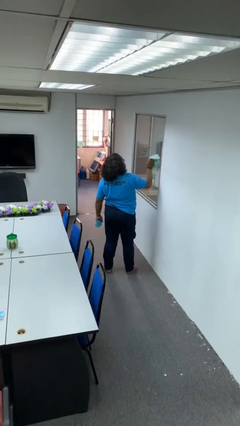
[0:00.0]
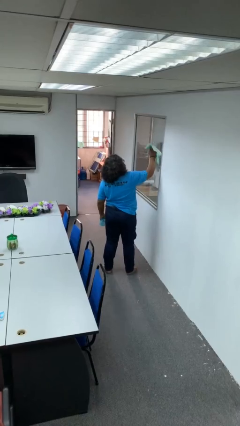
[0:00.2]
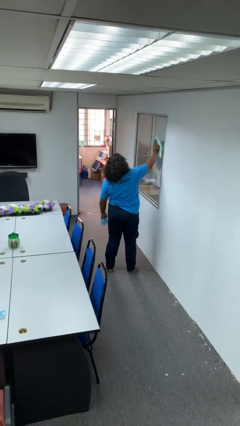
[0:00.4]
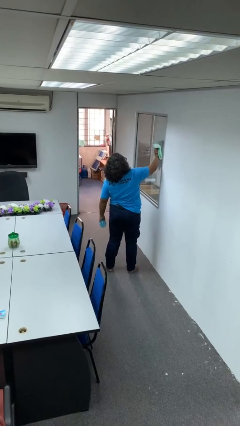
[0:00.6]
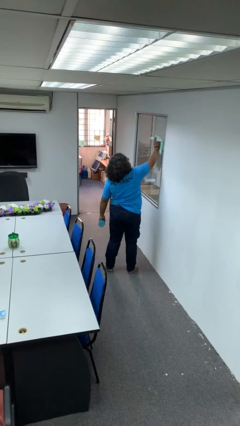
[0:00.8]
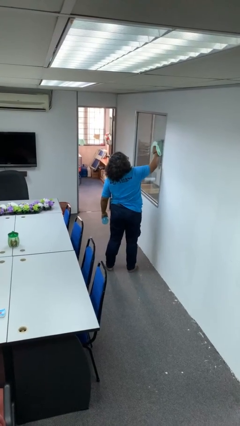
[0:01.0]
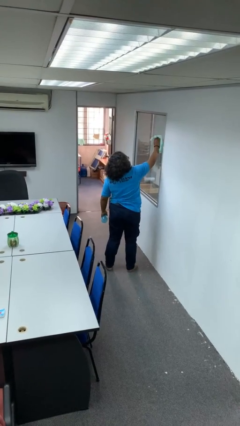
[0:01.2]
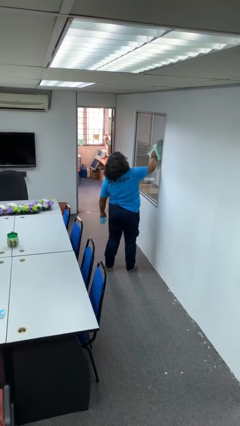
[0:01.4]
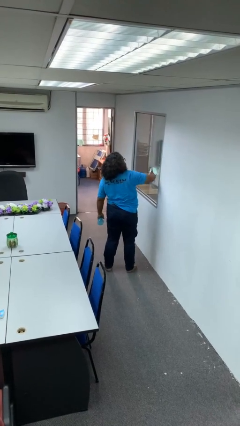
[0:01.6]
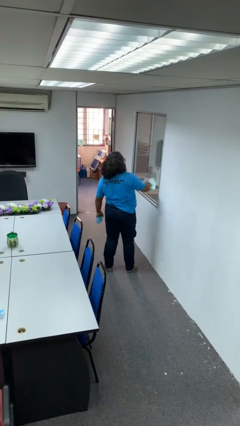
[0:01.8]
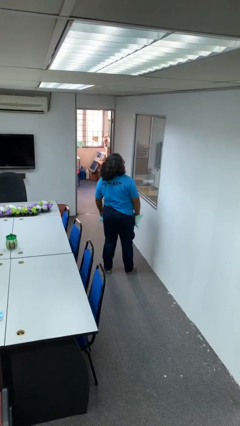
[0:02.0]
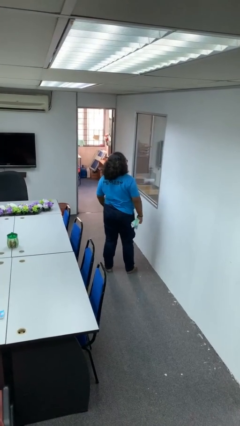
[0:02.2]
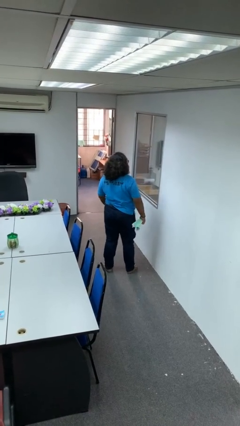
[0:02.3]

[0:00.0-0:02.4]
person washes window

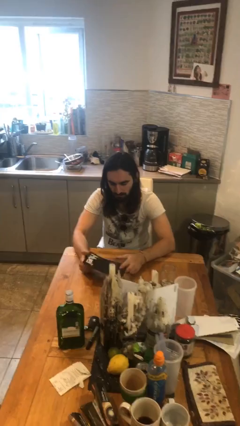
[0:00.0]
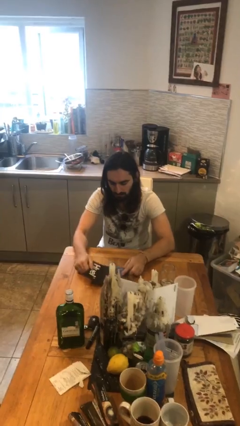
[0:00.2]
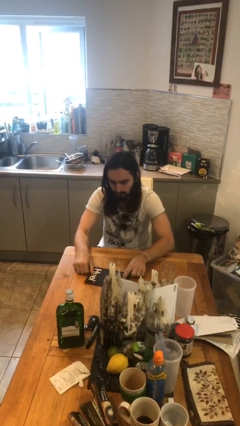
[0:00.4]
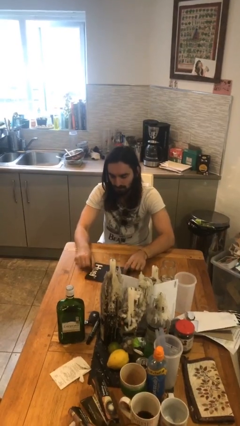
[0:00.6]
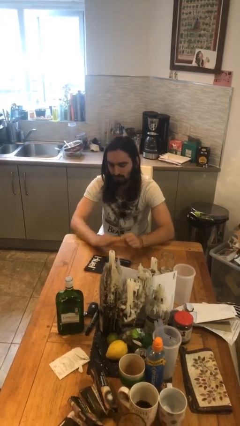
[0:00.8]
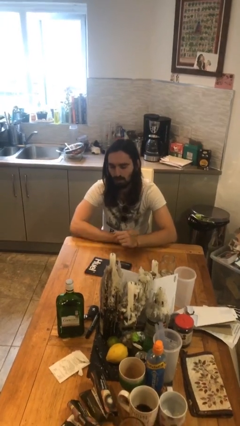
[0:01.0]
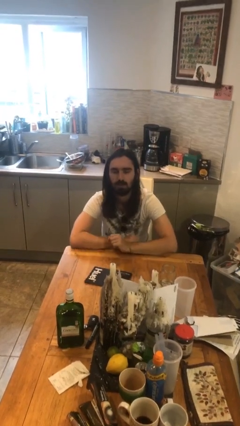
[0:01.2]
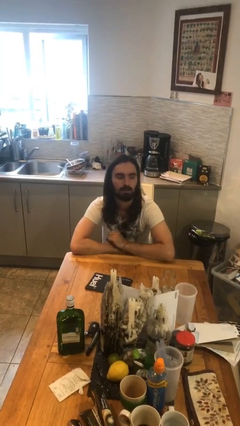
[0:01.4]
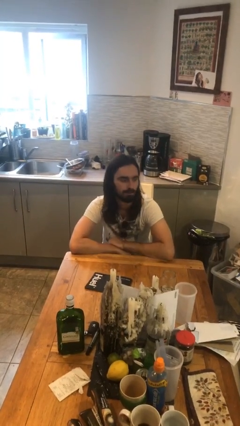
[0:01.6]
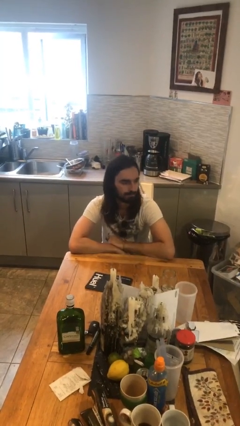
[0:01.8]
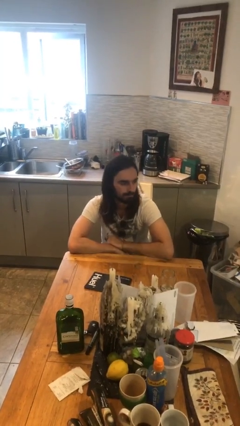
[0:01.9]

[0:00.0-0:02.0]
person puts down object on table

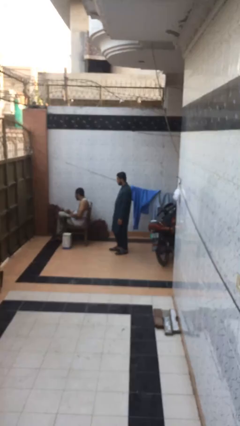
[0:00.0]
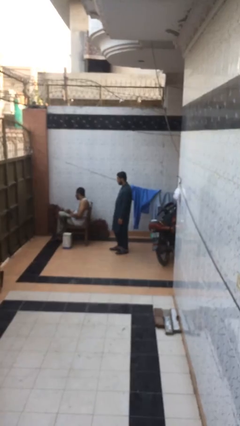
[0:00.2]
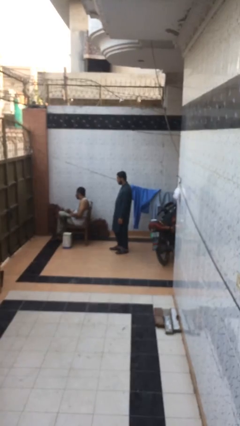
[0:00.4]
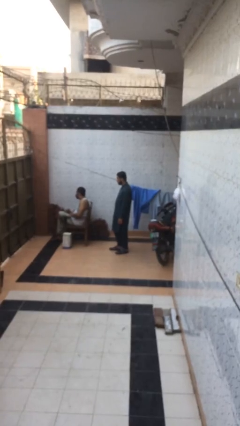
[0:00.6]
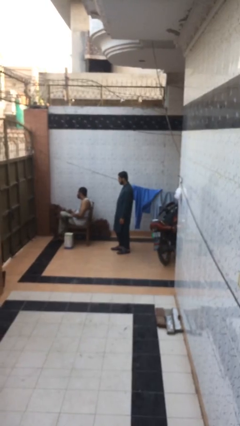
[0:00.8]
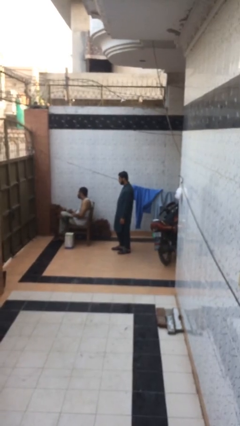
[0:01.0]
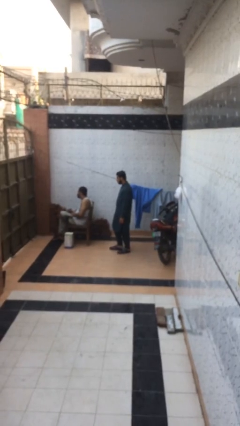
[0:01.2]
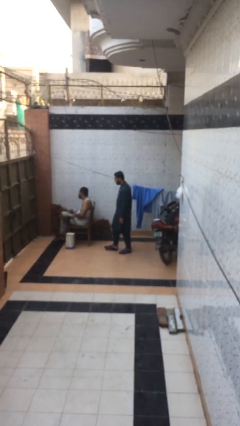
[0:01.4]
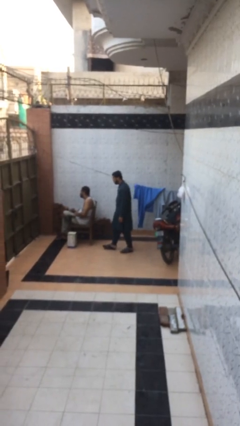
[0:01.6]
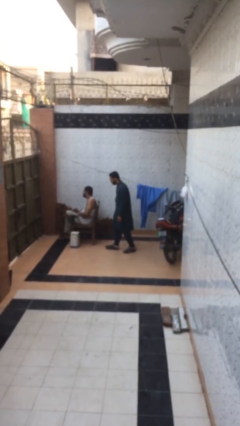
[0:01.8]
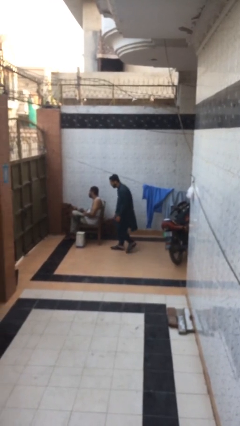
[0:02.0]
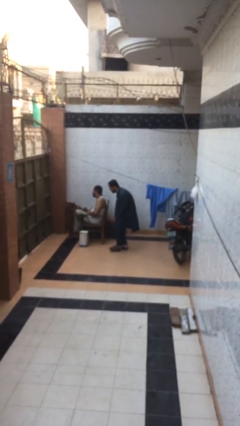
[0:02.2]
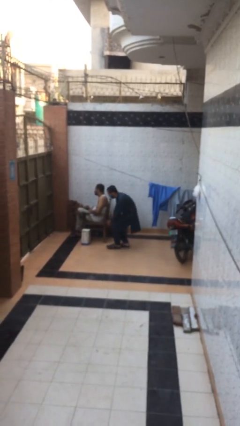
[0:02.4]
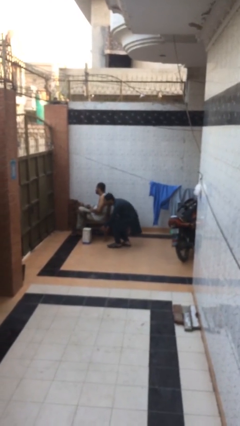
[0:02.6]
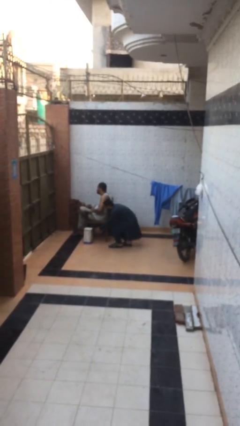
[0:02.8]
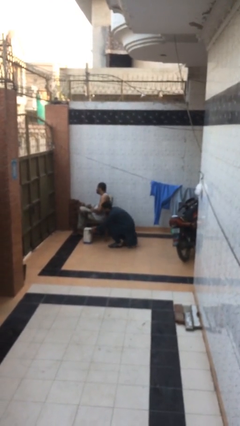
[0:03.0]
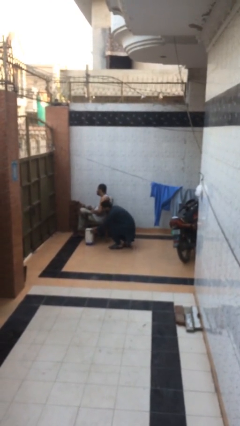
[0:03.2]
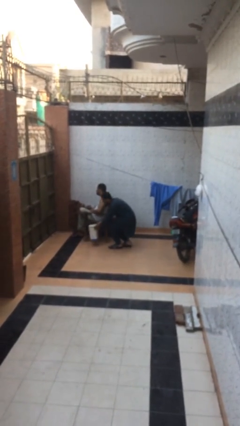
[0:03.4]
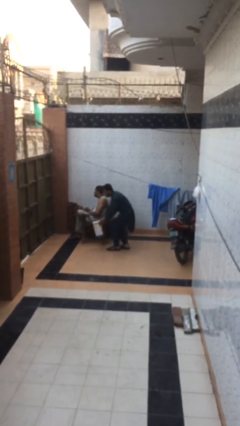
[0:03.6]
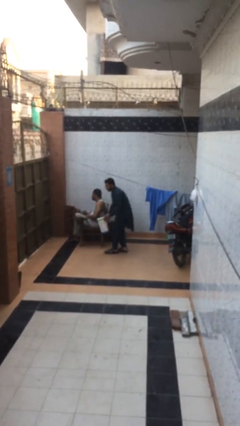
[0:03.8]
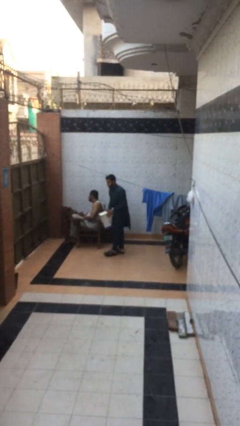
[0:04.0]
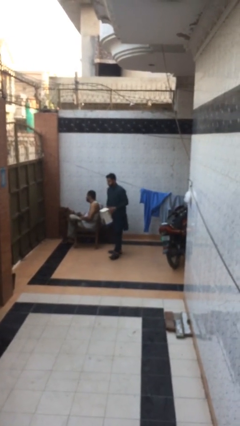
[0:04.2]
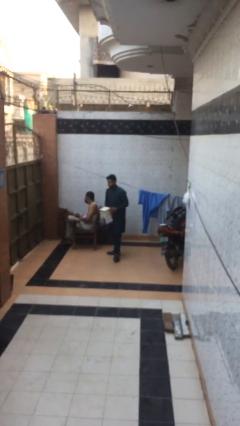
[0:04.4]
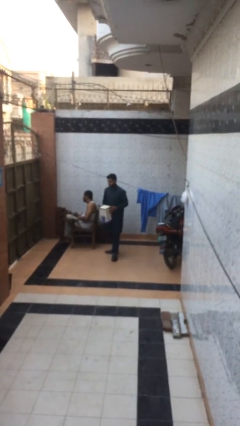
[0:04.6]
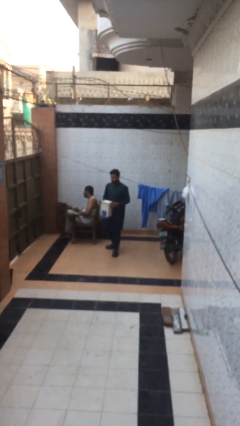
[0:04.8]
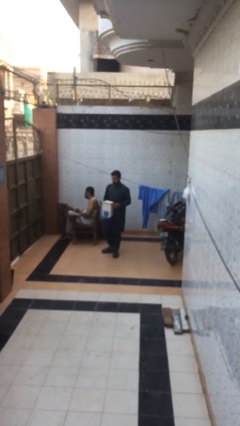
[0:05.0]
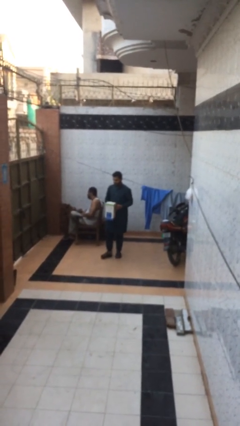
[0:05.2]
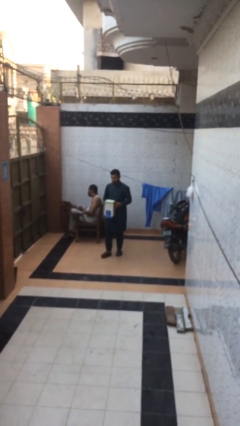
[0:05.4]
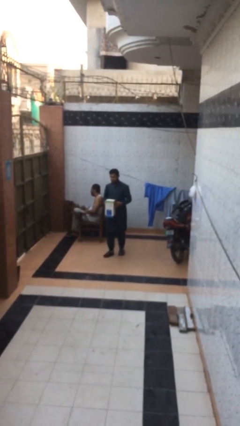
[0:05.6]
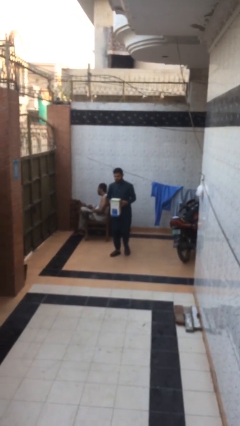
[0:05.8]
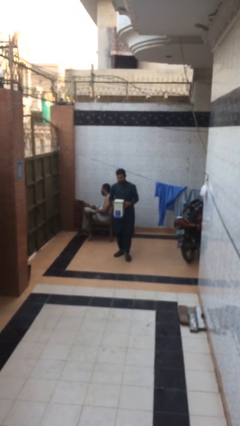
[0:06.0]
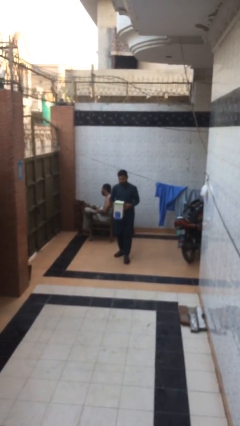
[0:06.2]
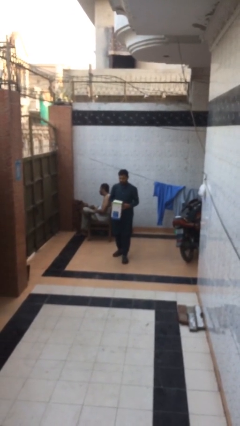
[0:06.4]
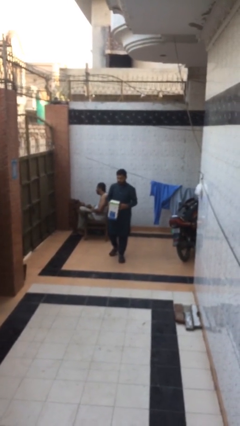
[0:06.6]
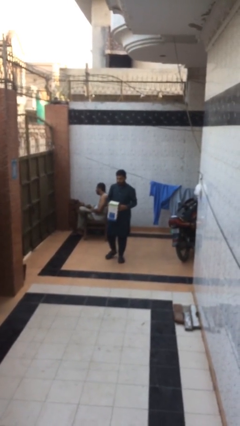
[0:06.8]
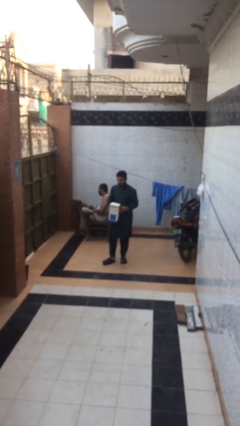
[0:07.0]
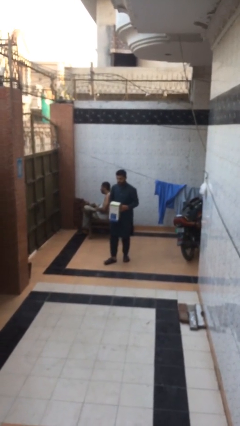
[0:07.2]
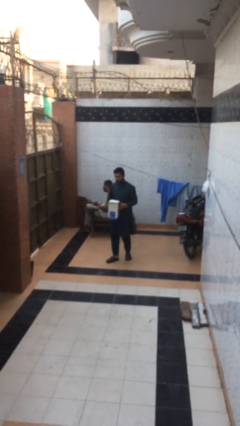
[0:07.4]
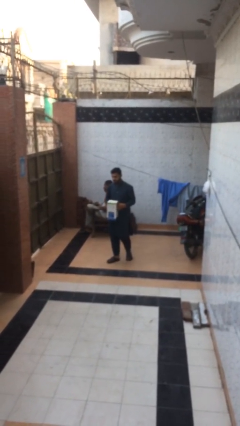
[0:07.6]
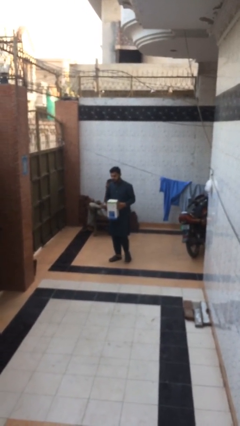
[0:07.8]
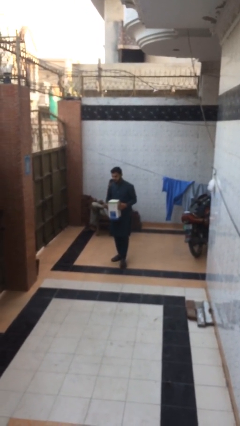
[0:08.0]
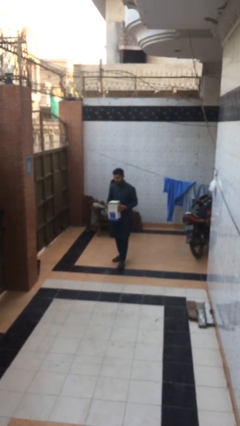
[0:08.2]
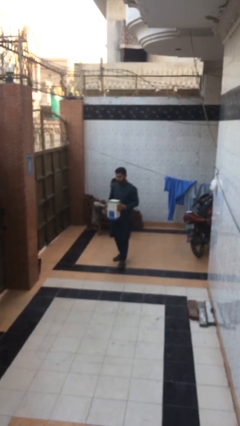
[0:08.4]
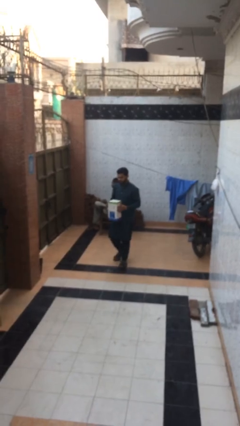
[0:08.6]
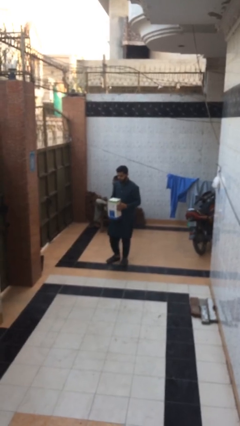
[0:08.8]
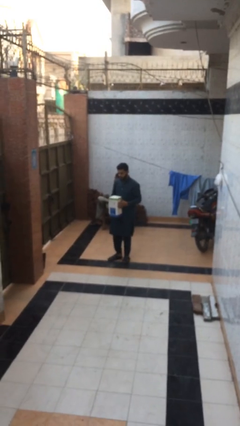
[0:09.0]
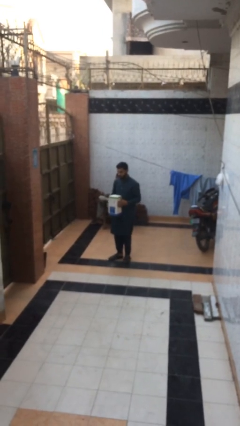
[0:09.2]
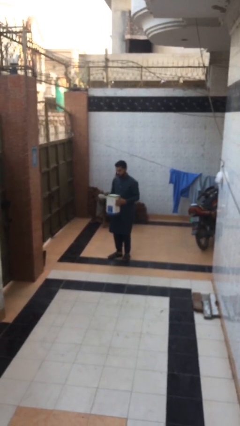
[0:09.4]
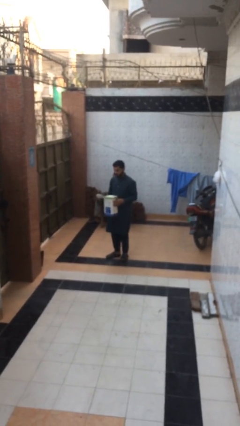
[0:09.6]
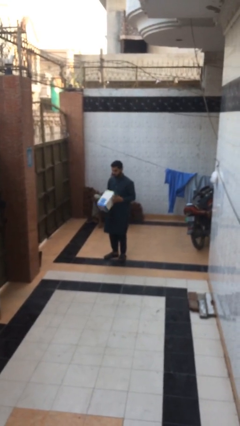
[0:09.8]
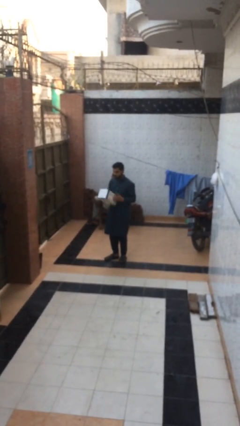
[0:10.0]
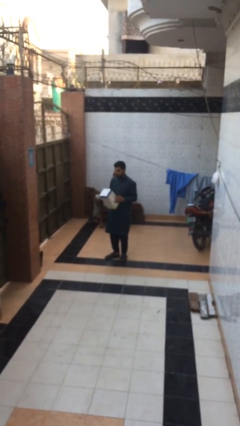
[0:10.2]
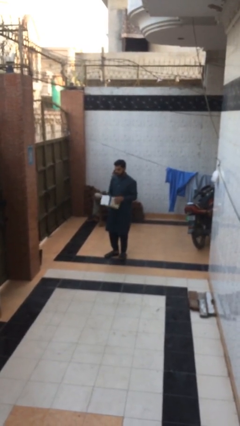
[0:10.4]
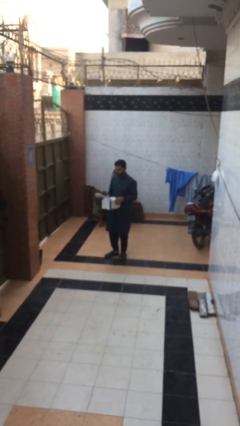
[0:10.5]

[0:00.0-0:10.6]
person steals object from person

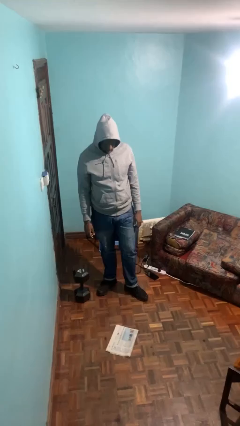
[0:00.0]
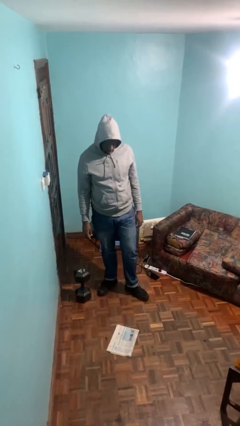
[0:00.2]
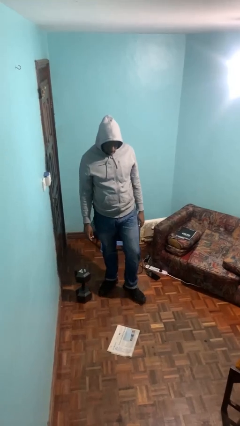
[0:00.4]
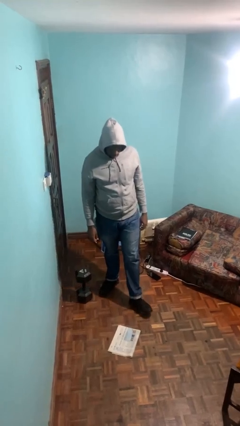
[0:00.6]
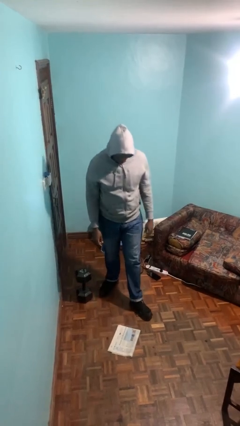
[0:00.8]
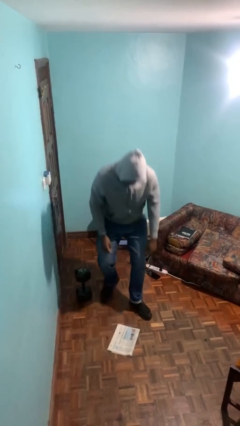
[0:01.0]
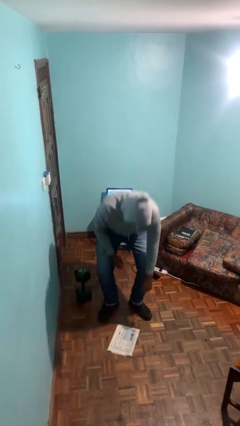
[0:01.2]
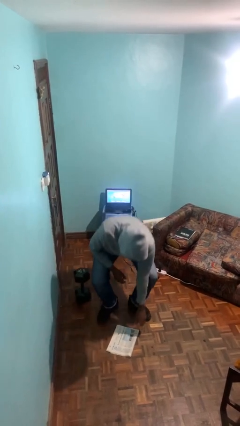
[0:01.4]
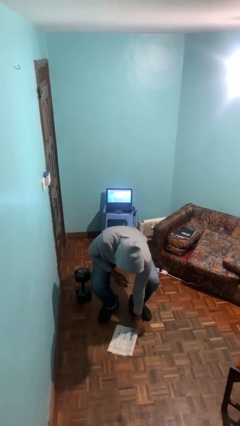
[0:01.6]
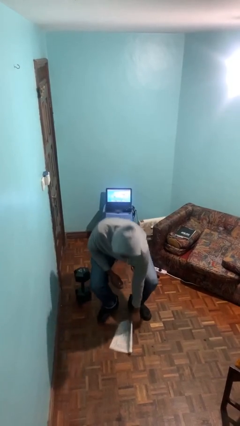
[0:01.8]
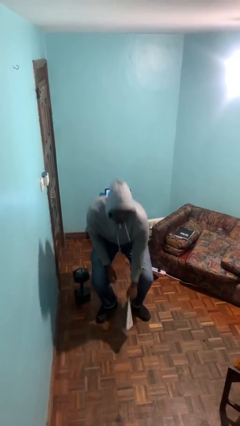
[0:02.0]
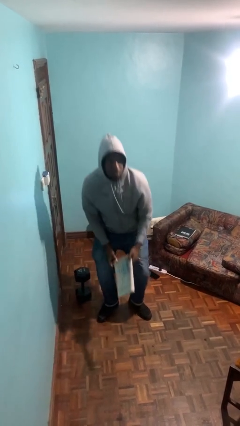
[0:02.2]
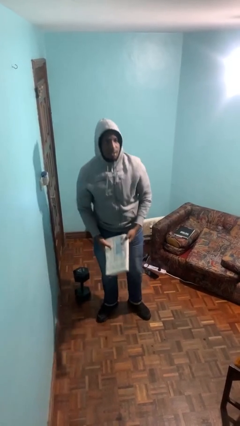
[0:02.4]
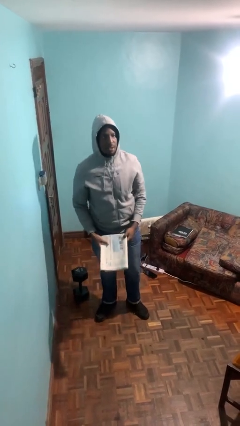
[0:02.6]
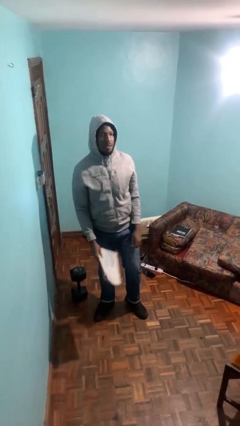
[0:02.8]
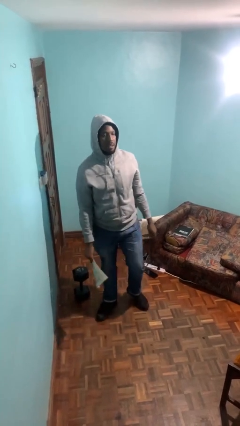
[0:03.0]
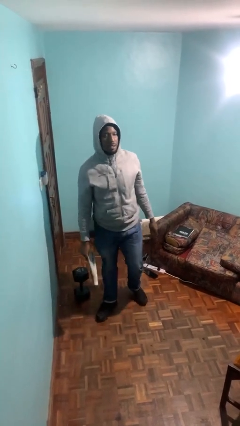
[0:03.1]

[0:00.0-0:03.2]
person picks up object from floor
